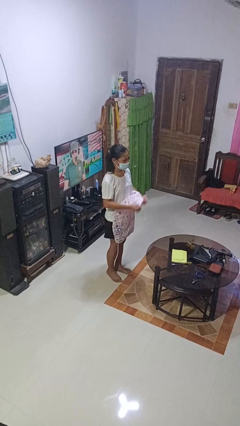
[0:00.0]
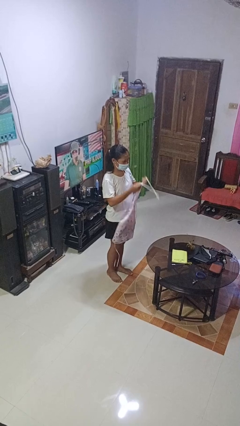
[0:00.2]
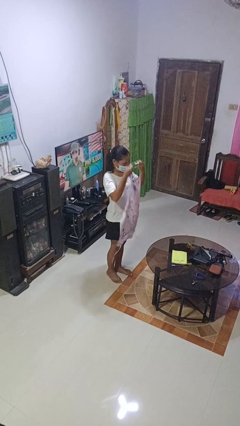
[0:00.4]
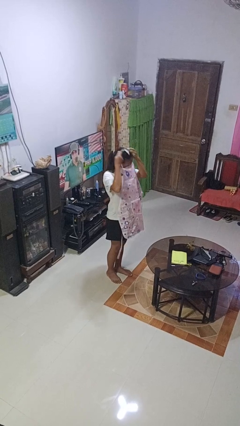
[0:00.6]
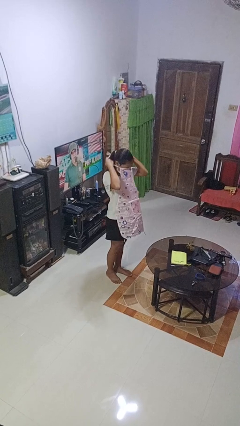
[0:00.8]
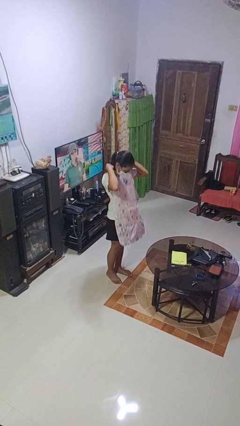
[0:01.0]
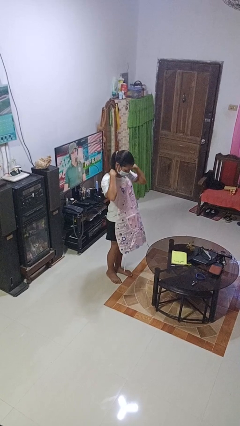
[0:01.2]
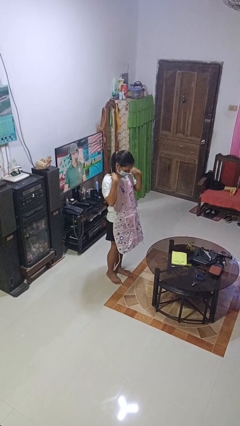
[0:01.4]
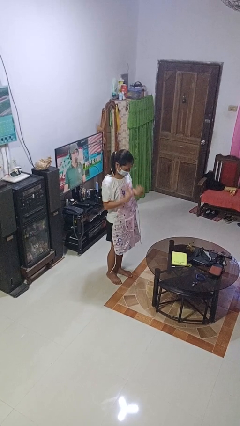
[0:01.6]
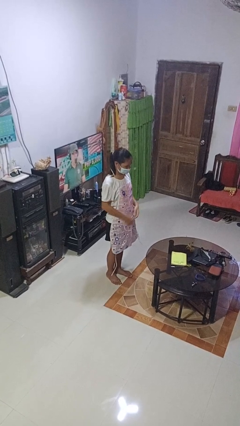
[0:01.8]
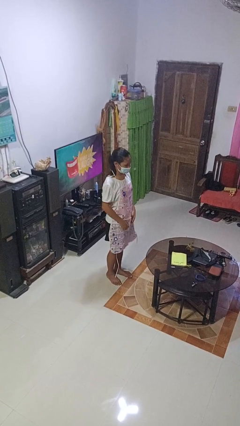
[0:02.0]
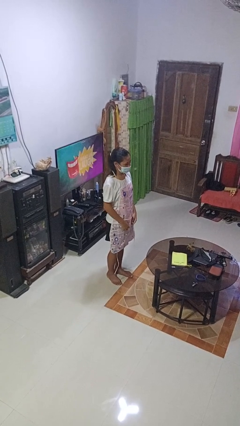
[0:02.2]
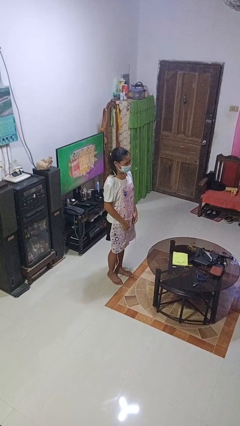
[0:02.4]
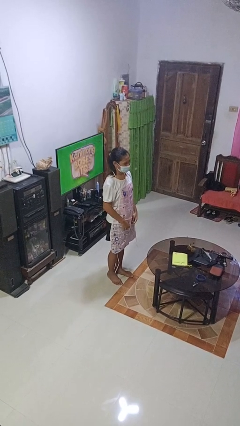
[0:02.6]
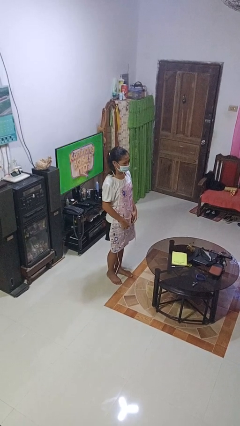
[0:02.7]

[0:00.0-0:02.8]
person puts on apron

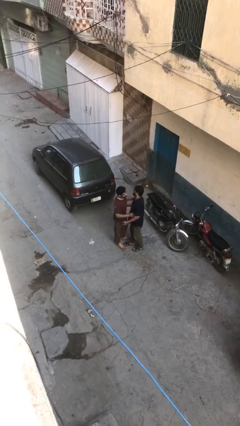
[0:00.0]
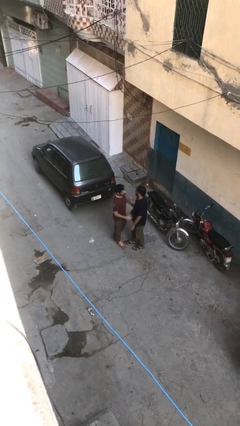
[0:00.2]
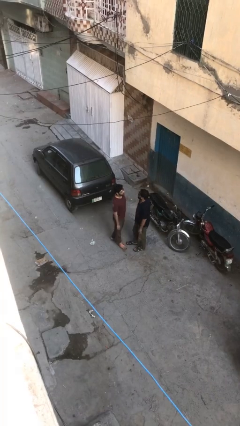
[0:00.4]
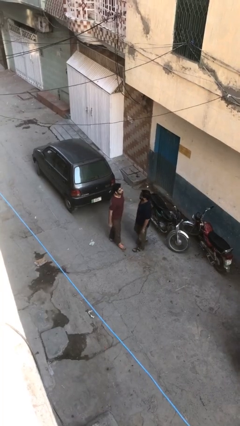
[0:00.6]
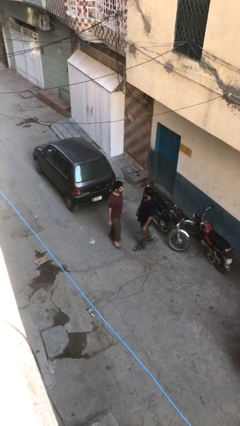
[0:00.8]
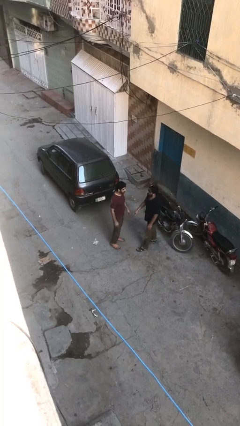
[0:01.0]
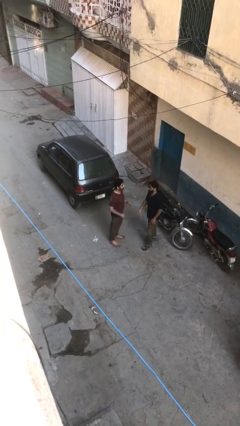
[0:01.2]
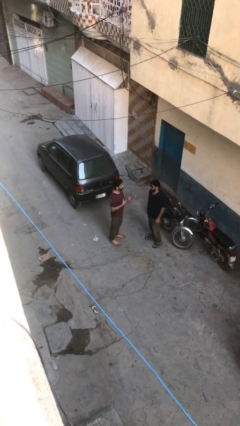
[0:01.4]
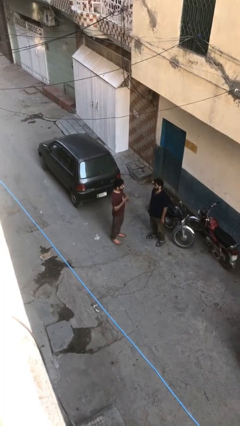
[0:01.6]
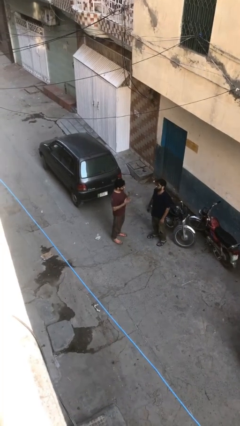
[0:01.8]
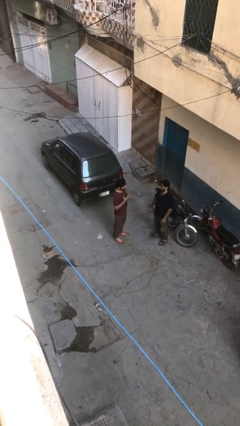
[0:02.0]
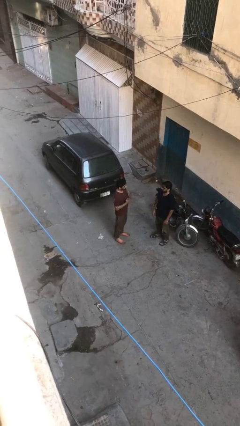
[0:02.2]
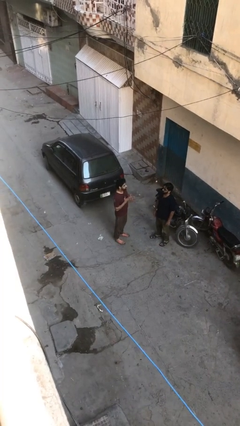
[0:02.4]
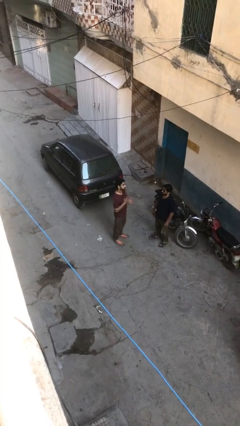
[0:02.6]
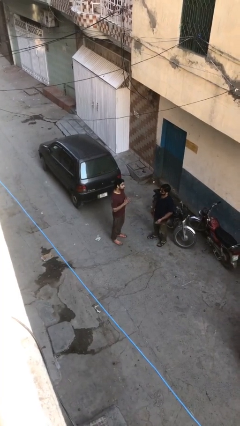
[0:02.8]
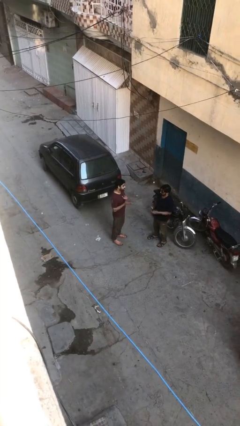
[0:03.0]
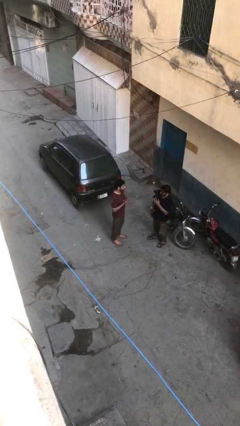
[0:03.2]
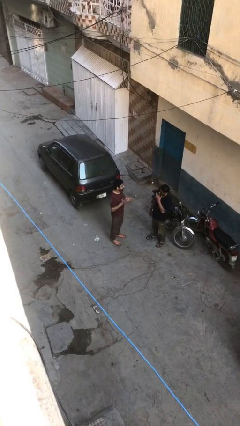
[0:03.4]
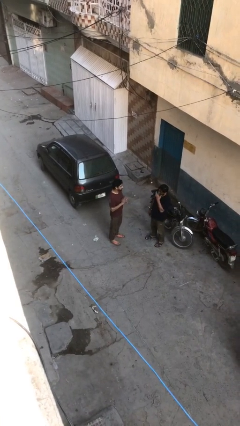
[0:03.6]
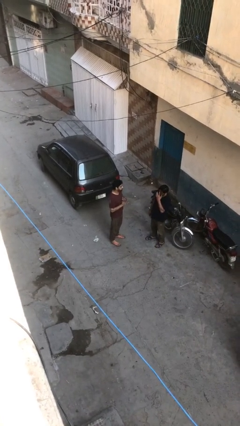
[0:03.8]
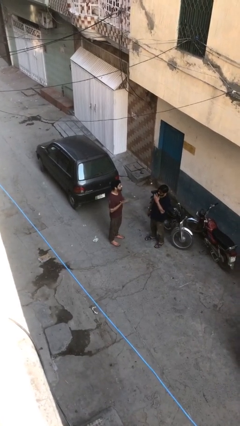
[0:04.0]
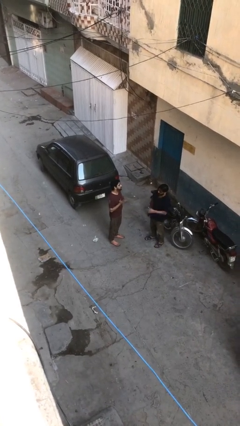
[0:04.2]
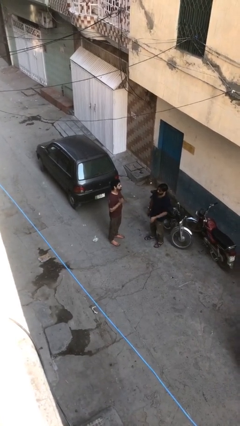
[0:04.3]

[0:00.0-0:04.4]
person talks to person

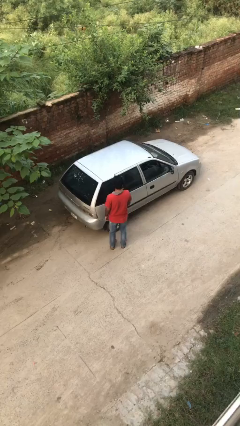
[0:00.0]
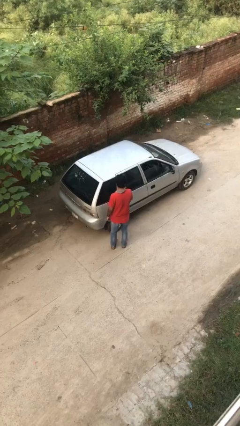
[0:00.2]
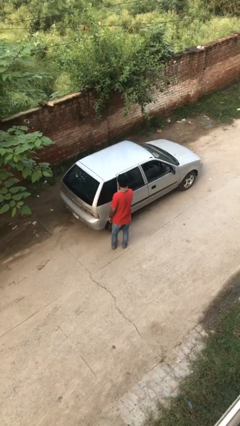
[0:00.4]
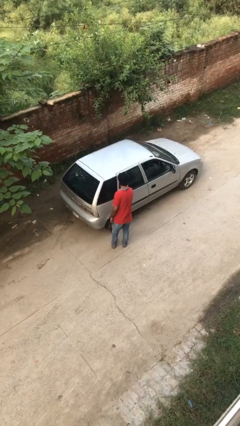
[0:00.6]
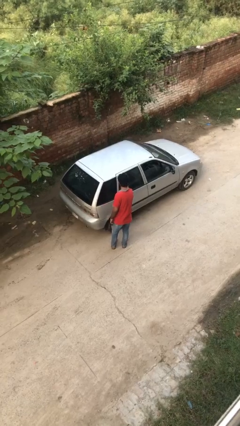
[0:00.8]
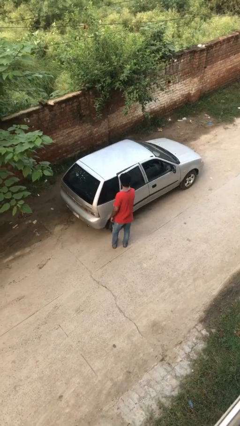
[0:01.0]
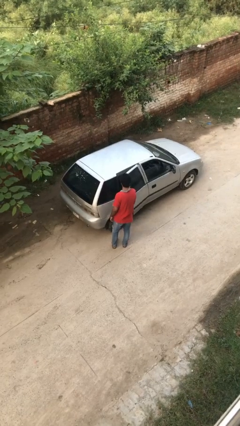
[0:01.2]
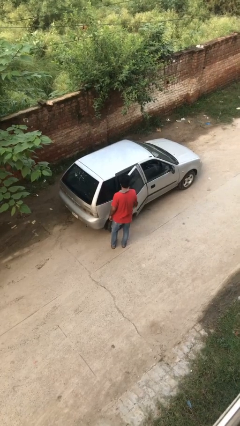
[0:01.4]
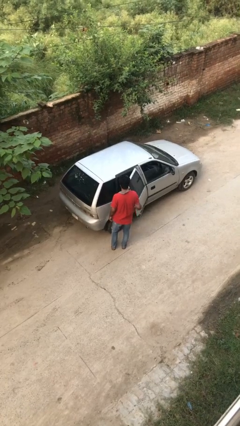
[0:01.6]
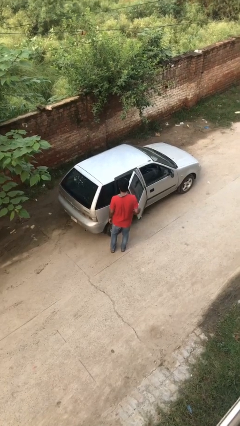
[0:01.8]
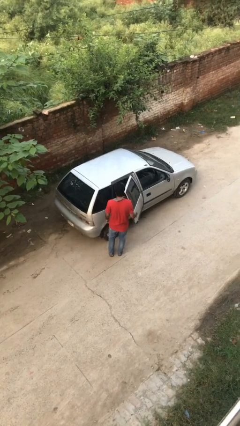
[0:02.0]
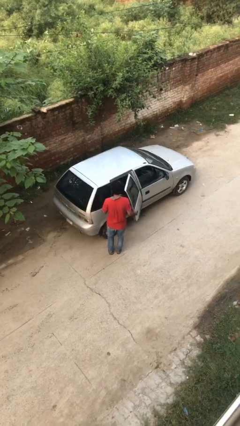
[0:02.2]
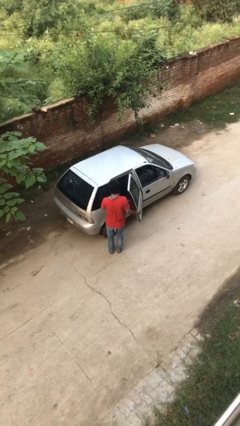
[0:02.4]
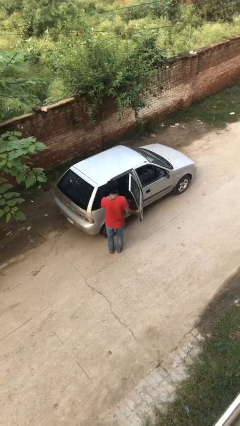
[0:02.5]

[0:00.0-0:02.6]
person opens car door

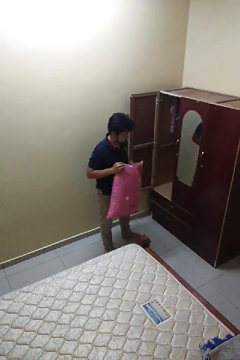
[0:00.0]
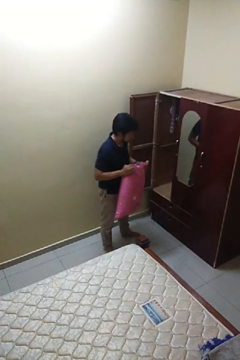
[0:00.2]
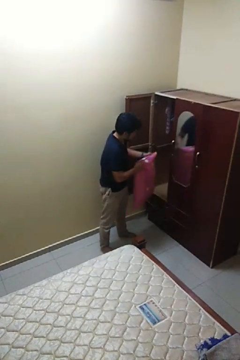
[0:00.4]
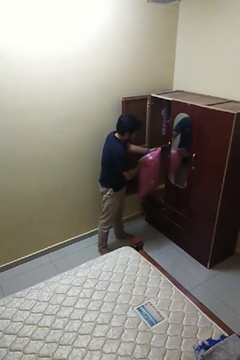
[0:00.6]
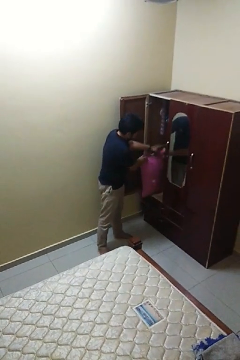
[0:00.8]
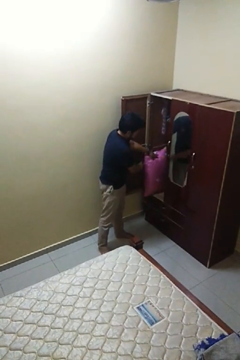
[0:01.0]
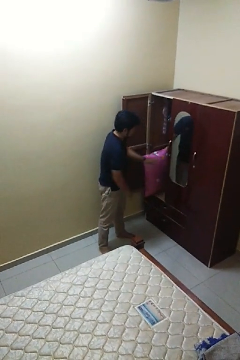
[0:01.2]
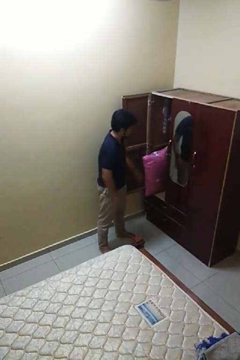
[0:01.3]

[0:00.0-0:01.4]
person puts down object into cabinet

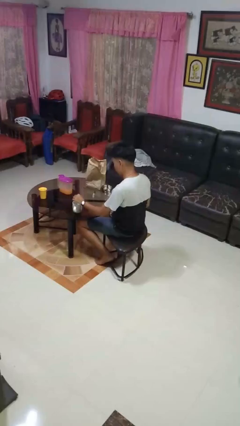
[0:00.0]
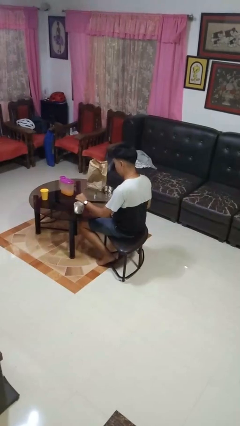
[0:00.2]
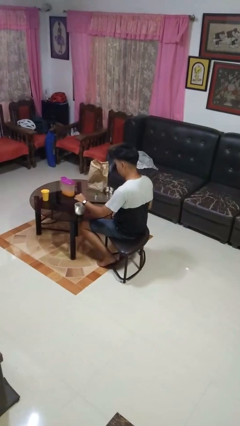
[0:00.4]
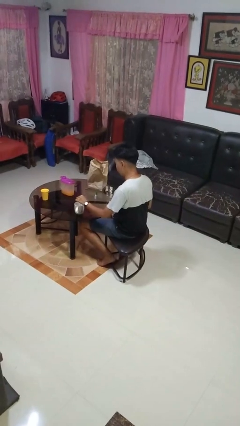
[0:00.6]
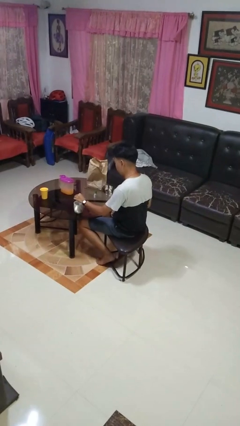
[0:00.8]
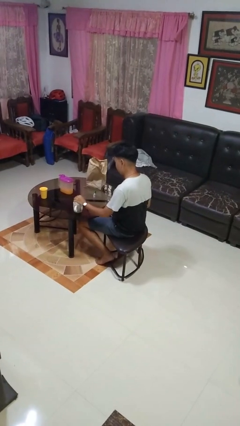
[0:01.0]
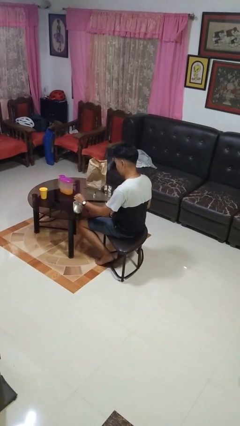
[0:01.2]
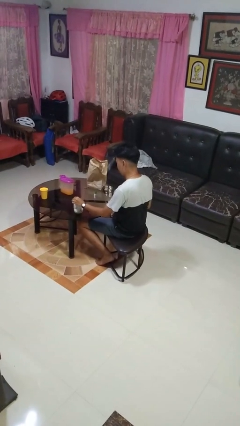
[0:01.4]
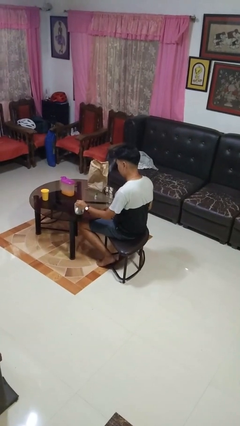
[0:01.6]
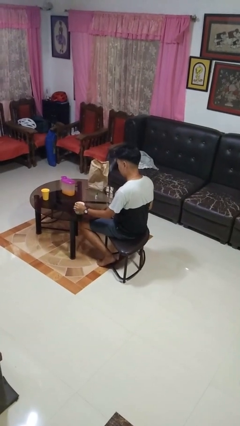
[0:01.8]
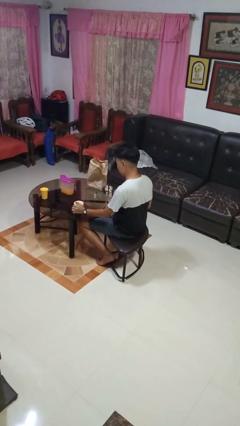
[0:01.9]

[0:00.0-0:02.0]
person stirs mug

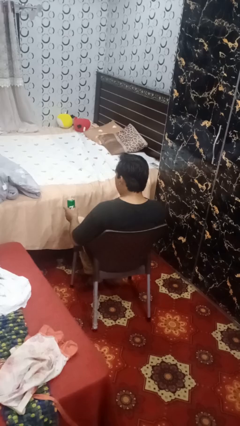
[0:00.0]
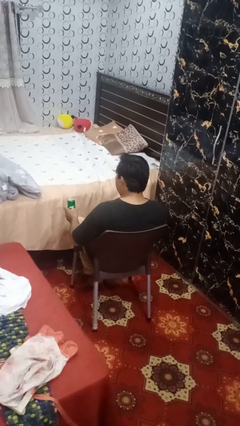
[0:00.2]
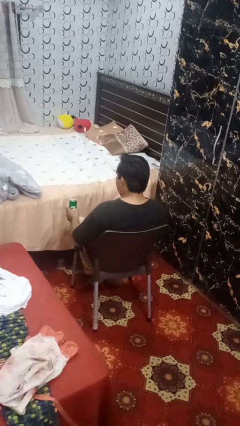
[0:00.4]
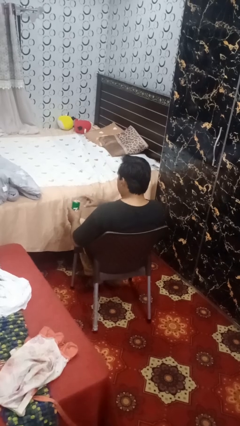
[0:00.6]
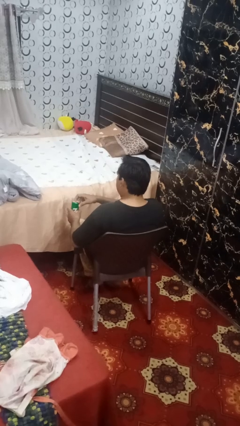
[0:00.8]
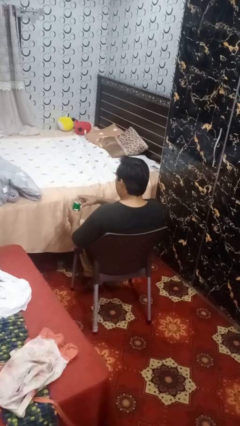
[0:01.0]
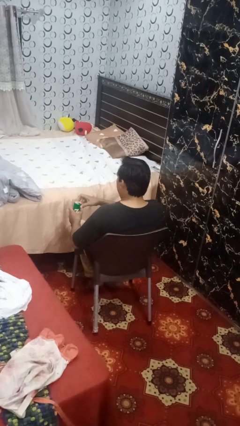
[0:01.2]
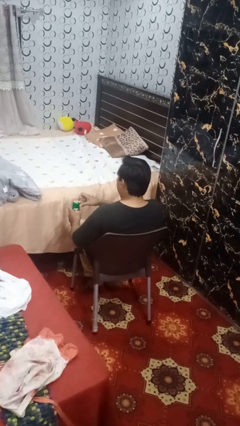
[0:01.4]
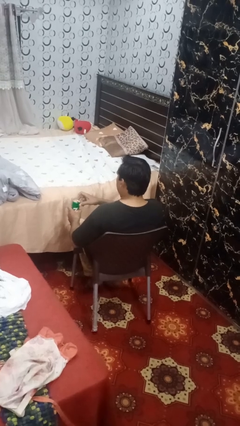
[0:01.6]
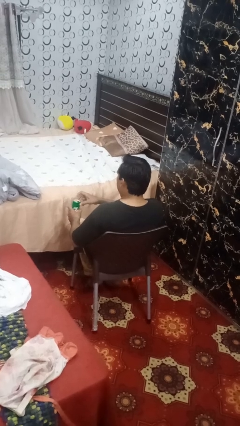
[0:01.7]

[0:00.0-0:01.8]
person opens beverage can

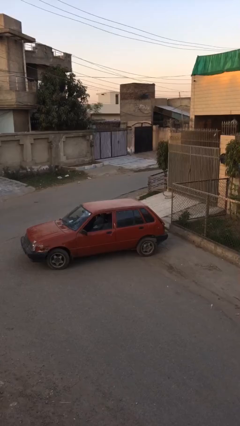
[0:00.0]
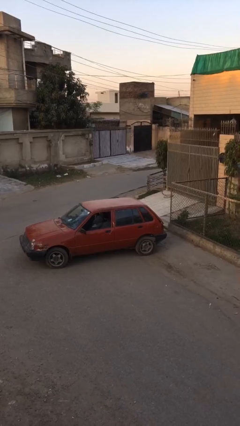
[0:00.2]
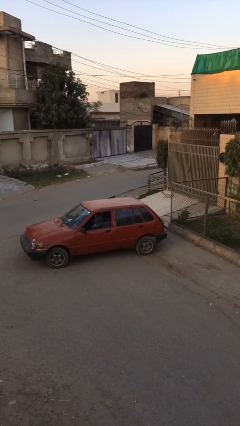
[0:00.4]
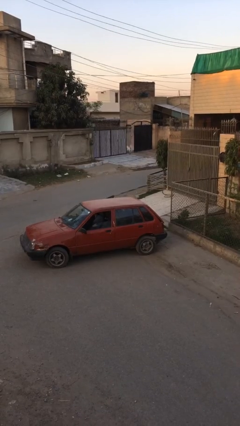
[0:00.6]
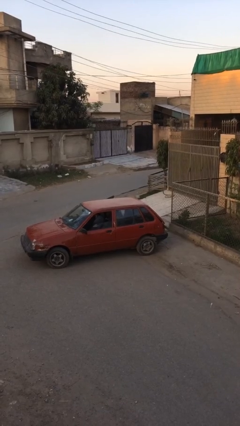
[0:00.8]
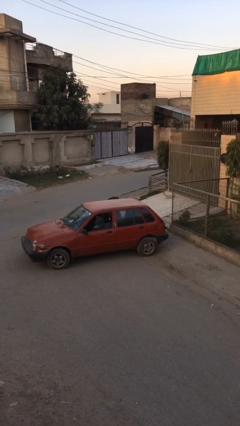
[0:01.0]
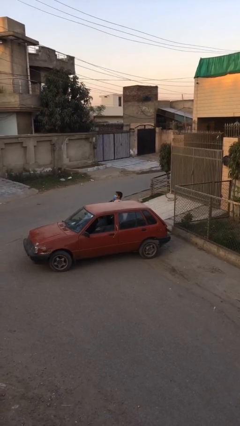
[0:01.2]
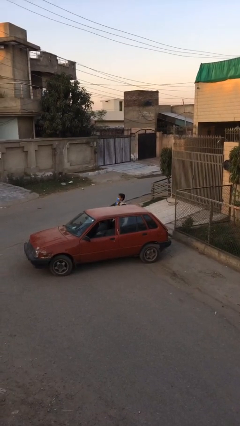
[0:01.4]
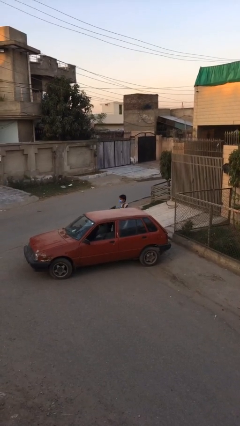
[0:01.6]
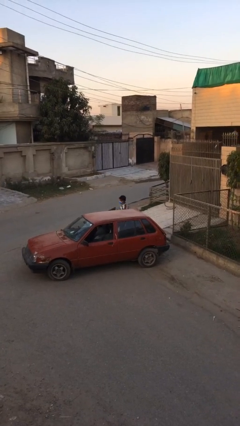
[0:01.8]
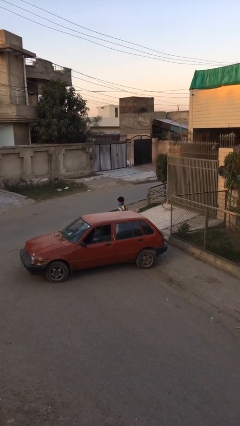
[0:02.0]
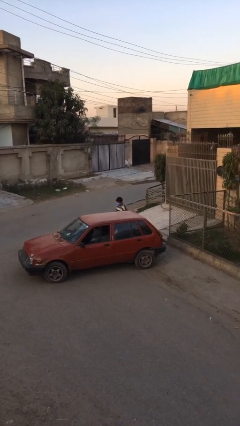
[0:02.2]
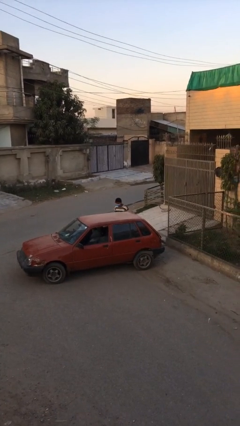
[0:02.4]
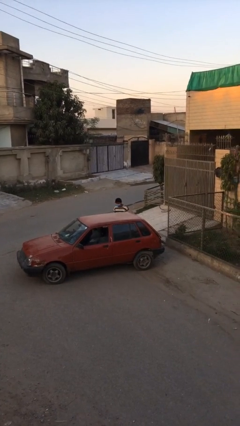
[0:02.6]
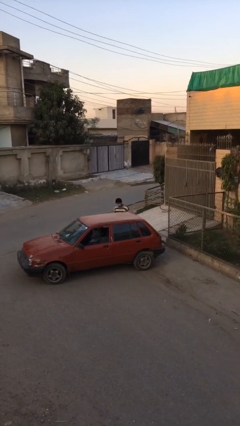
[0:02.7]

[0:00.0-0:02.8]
person exits car
